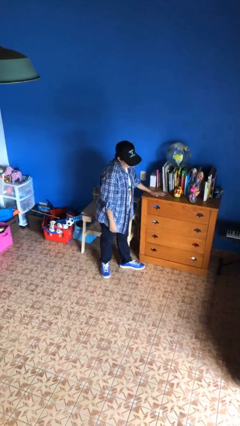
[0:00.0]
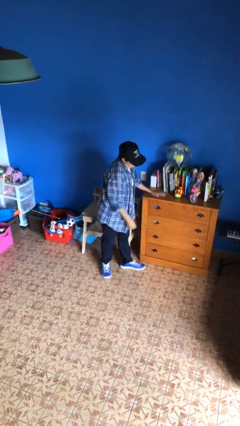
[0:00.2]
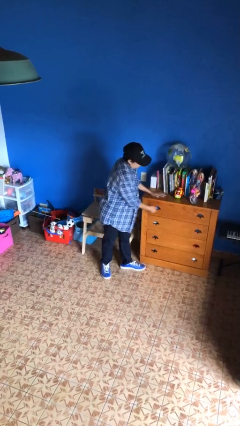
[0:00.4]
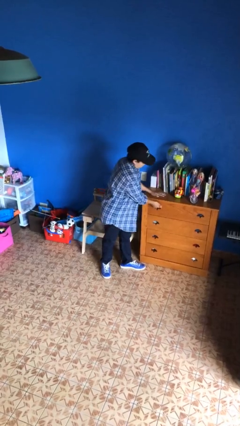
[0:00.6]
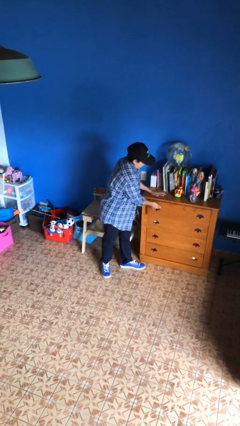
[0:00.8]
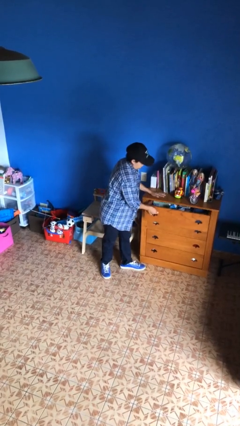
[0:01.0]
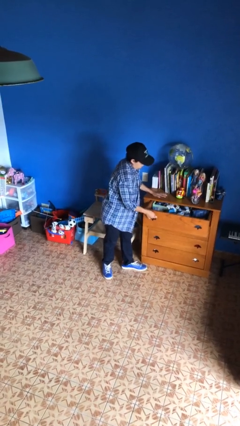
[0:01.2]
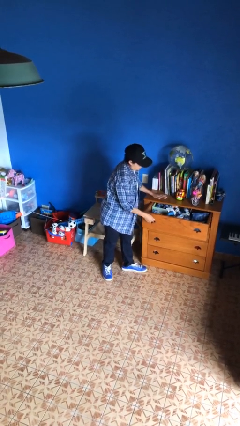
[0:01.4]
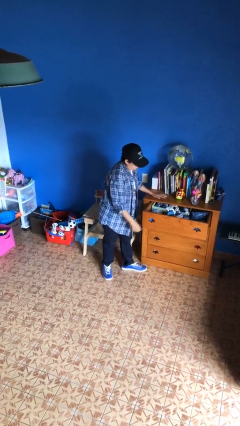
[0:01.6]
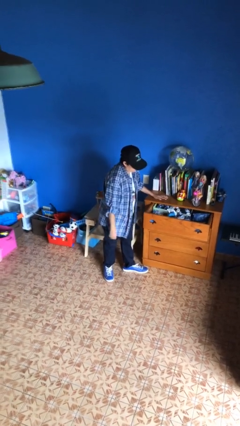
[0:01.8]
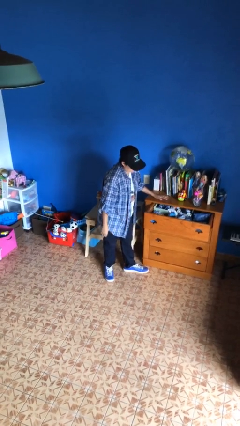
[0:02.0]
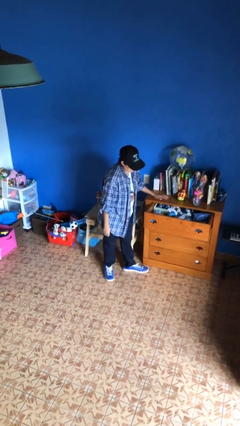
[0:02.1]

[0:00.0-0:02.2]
person opens dresser drawer

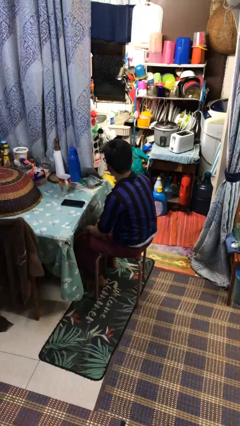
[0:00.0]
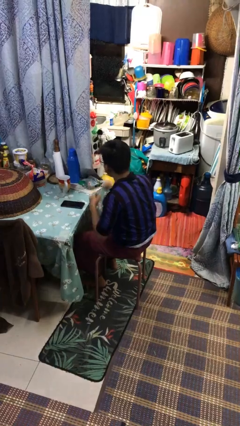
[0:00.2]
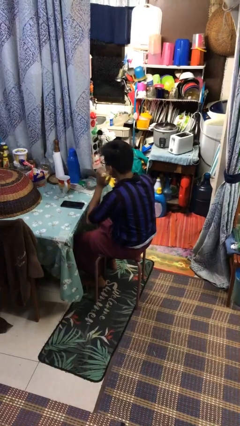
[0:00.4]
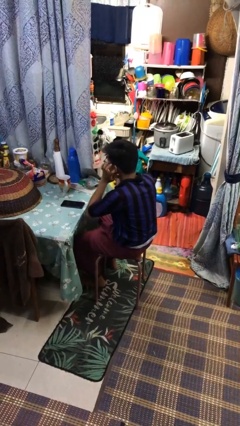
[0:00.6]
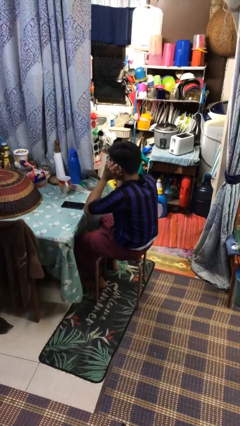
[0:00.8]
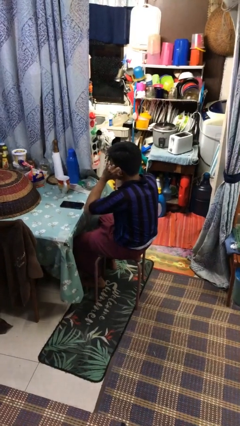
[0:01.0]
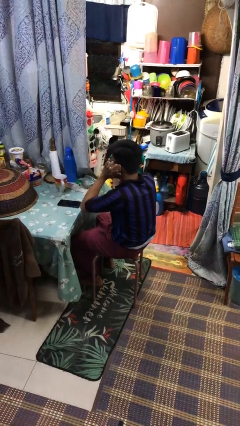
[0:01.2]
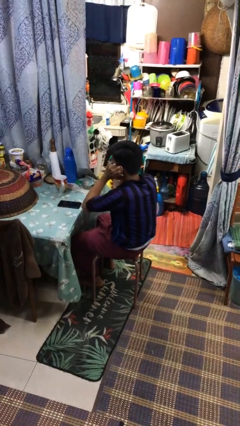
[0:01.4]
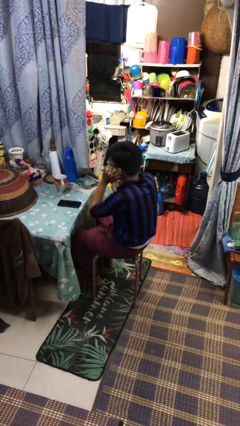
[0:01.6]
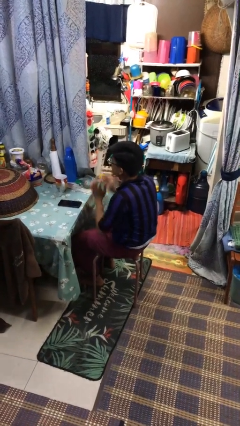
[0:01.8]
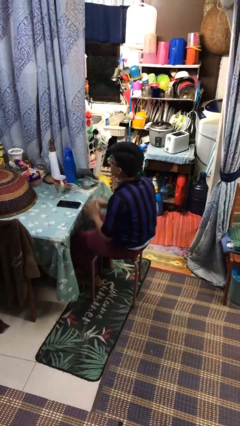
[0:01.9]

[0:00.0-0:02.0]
person puts fingers in ear

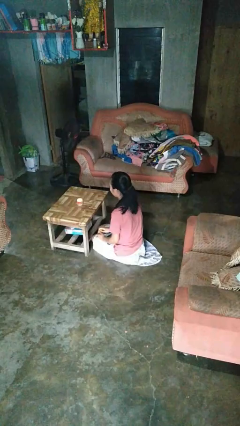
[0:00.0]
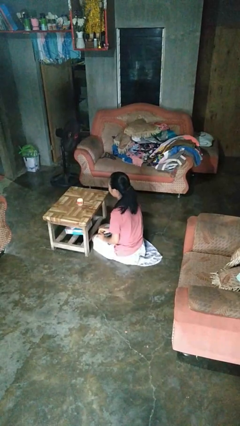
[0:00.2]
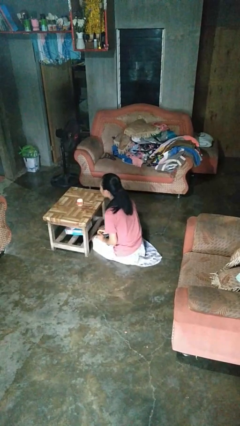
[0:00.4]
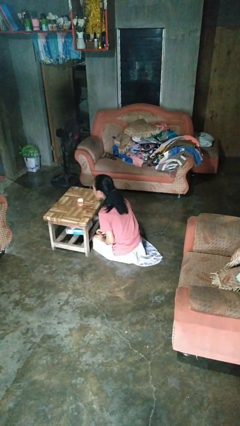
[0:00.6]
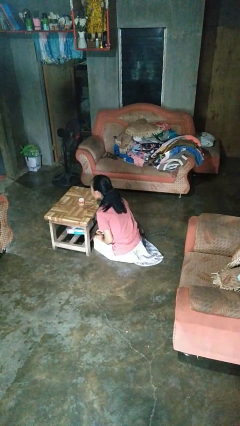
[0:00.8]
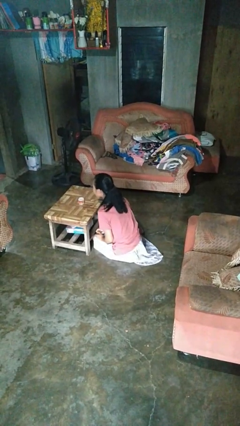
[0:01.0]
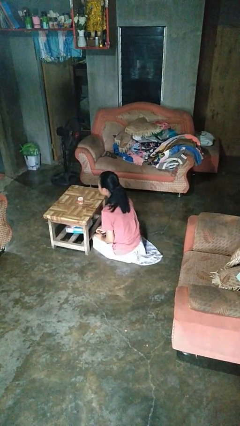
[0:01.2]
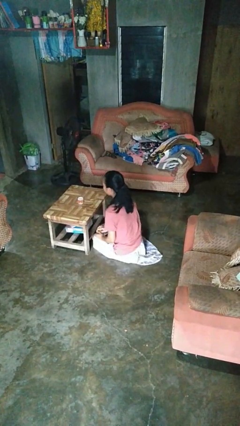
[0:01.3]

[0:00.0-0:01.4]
person extinguishes candle

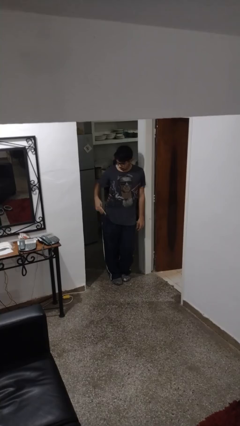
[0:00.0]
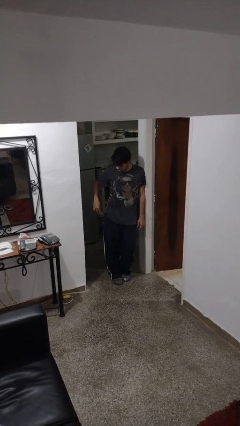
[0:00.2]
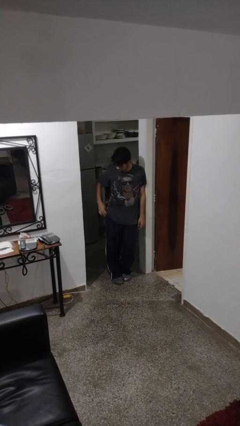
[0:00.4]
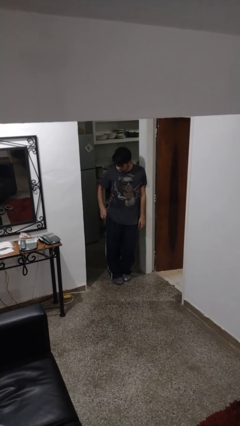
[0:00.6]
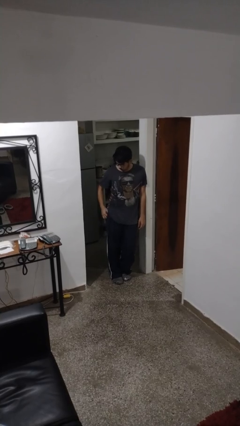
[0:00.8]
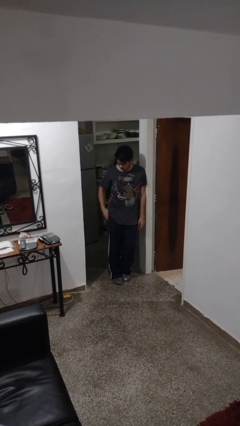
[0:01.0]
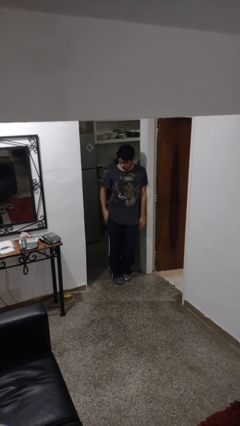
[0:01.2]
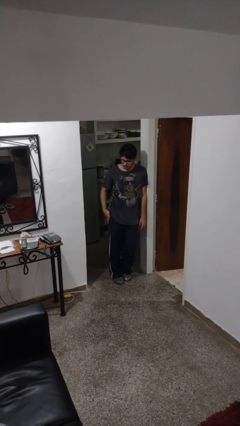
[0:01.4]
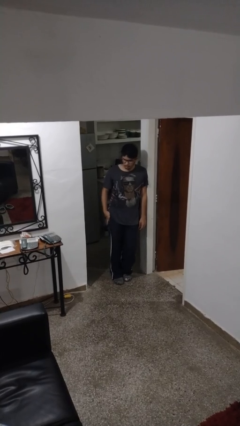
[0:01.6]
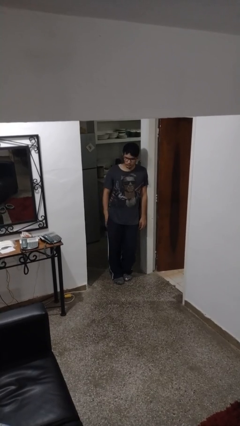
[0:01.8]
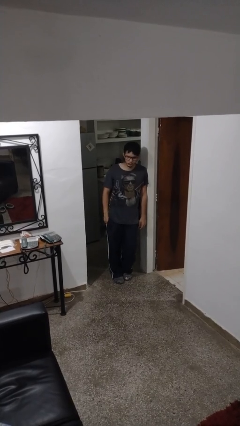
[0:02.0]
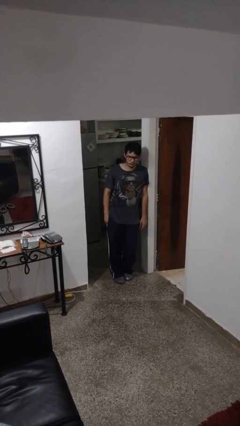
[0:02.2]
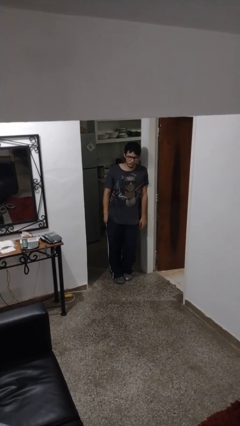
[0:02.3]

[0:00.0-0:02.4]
person puts phone into pocket

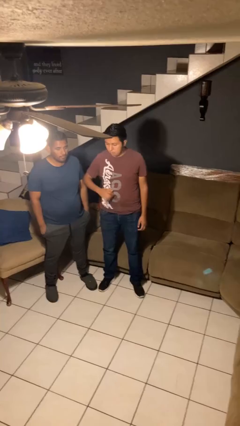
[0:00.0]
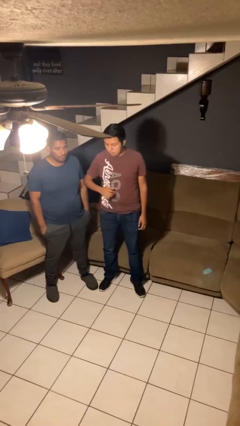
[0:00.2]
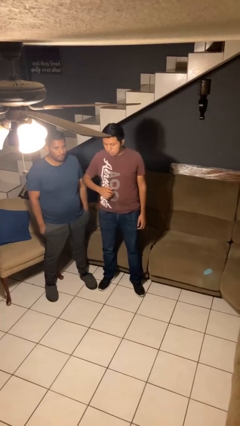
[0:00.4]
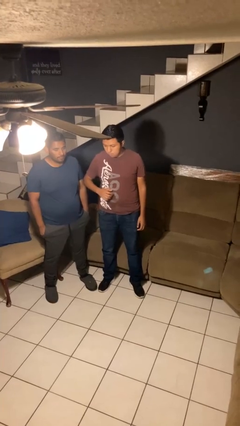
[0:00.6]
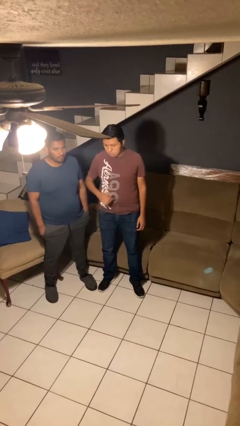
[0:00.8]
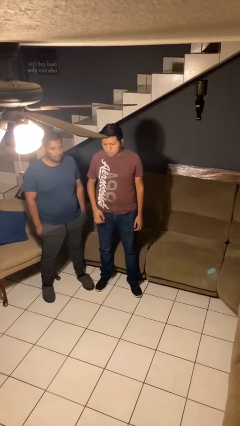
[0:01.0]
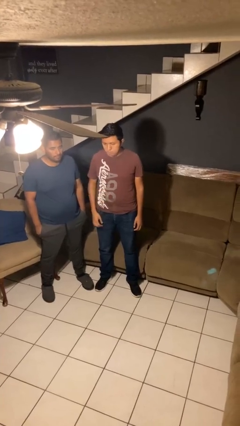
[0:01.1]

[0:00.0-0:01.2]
person nudges person with elbow

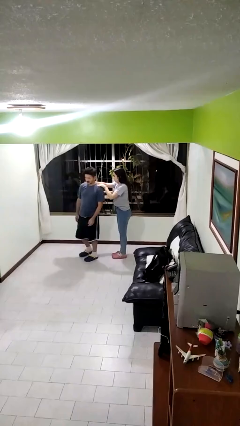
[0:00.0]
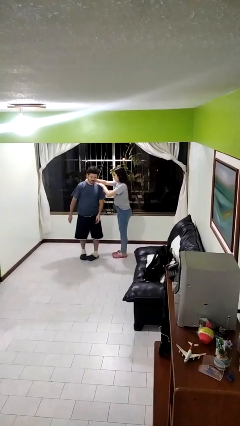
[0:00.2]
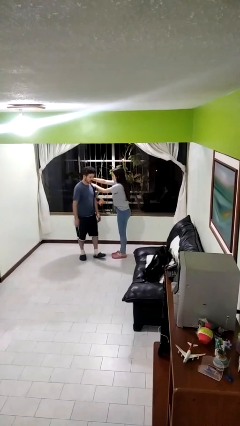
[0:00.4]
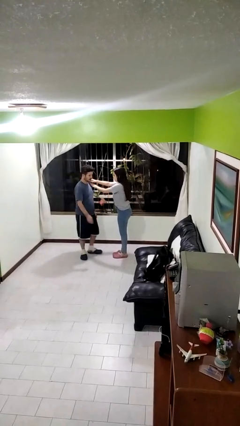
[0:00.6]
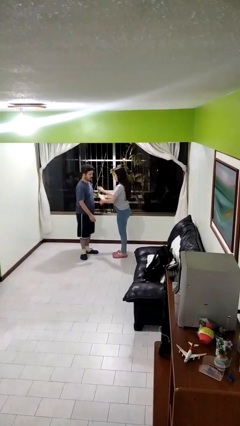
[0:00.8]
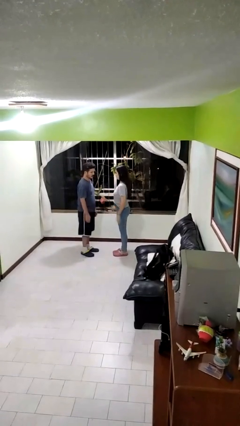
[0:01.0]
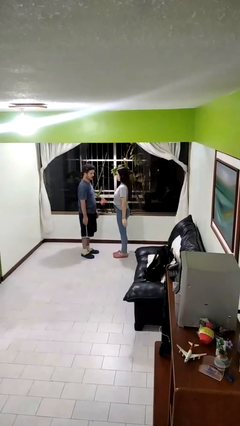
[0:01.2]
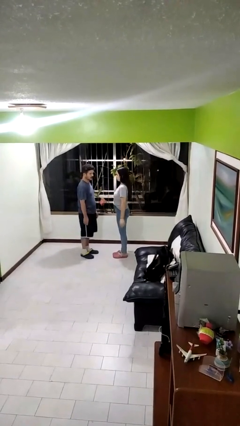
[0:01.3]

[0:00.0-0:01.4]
person spins person around

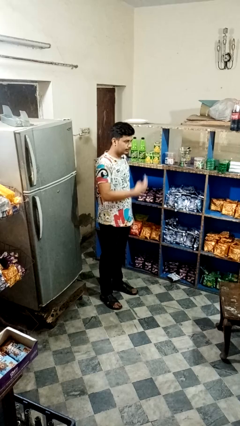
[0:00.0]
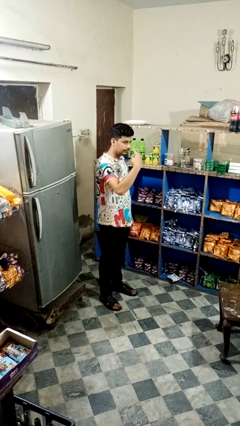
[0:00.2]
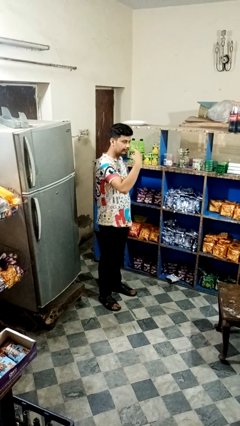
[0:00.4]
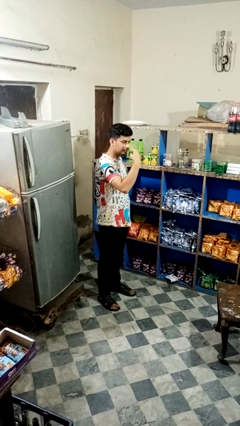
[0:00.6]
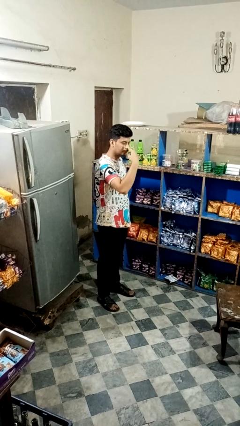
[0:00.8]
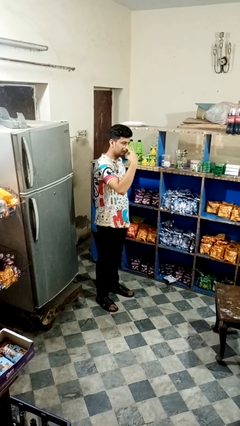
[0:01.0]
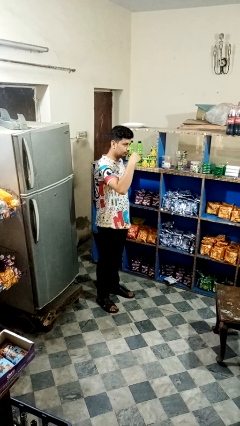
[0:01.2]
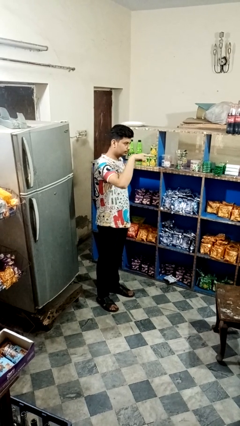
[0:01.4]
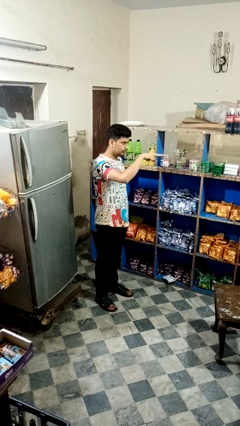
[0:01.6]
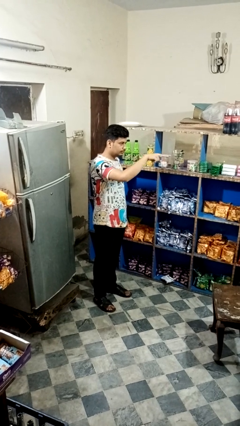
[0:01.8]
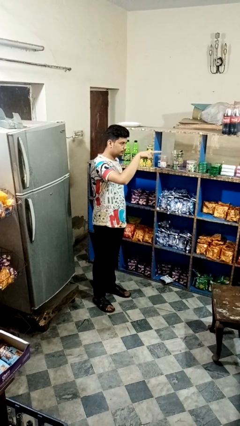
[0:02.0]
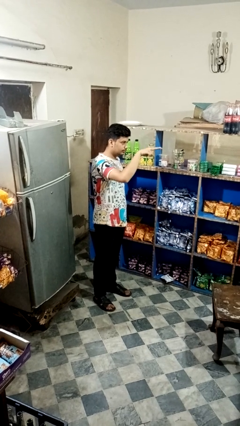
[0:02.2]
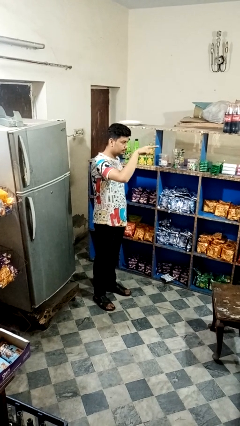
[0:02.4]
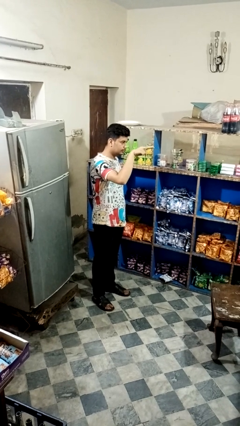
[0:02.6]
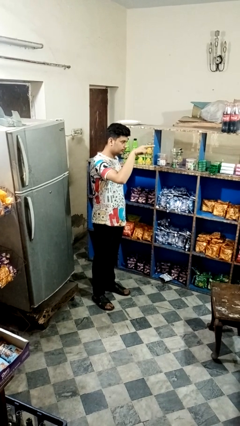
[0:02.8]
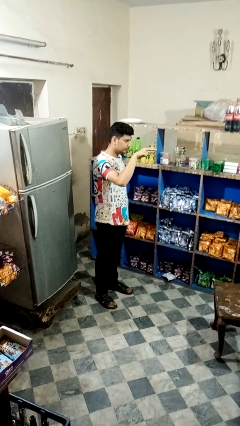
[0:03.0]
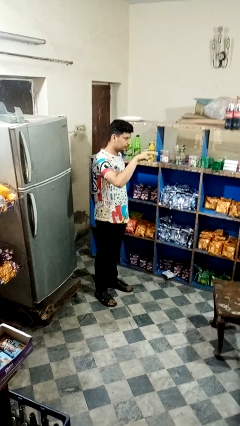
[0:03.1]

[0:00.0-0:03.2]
person gestures watch closely

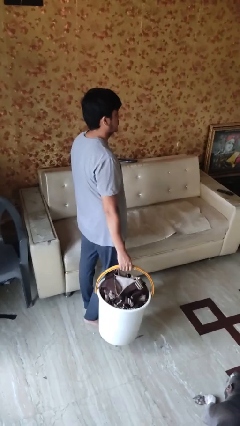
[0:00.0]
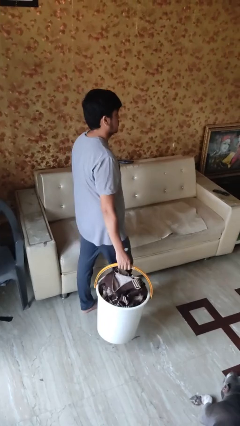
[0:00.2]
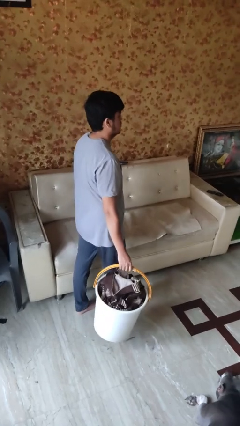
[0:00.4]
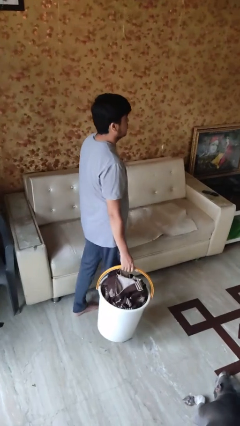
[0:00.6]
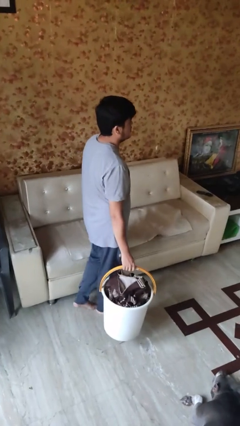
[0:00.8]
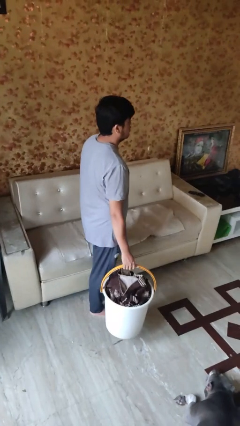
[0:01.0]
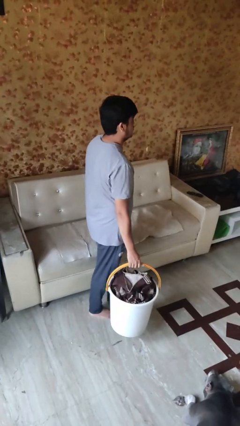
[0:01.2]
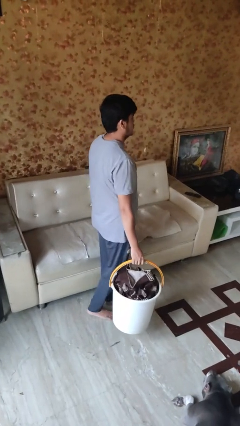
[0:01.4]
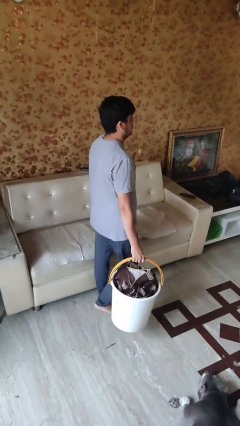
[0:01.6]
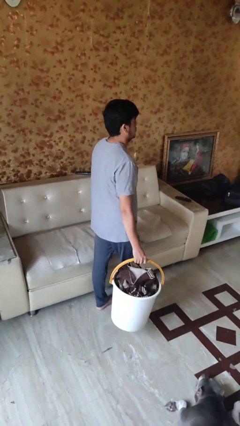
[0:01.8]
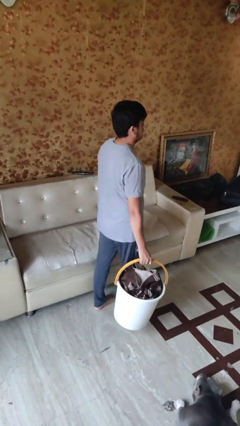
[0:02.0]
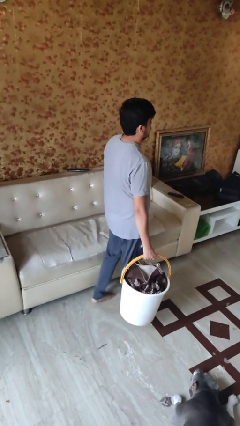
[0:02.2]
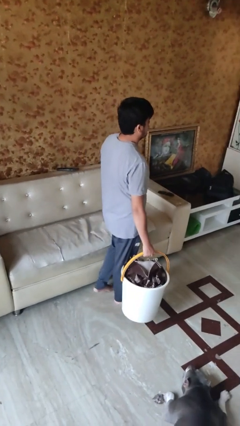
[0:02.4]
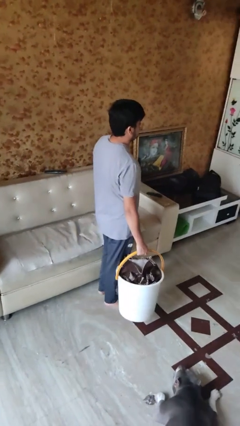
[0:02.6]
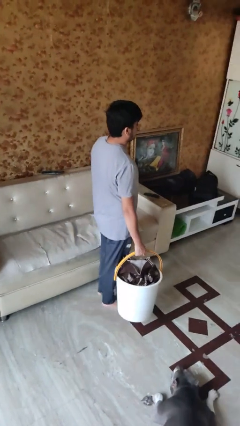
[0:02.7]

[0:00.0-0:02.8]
person carries laundry basket

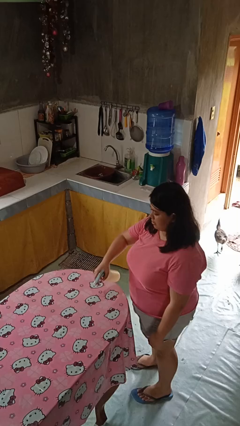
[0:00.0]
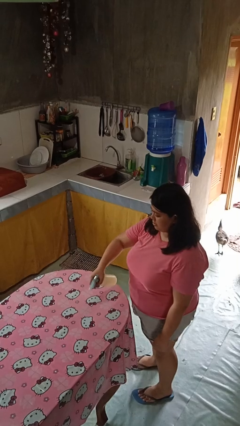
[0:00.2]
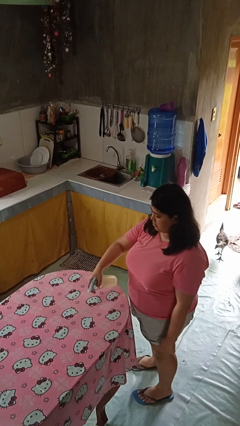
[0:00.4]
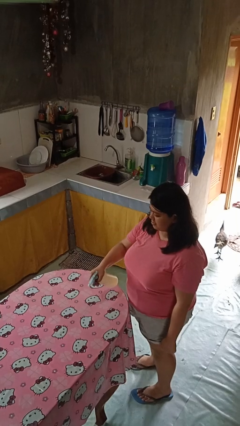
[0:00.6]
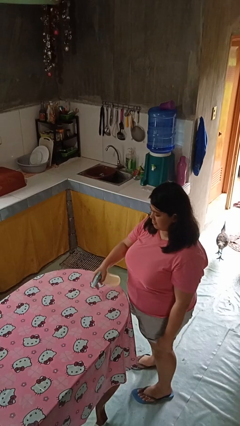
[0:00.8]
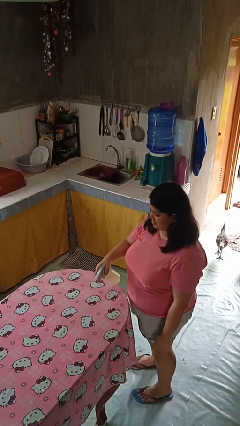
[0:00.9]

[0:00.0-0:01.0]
person sprays from bottle
